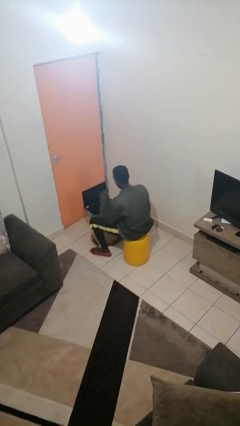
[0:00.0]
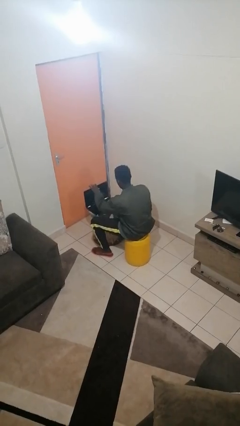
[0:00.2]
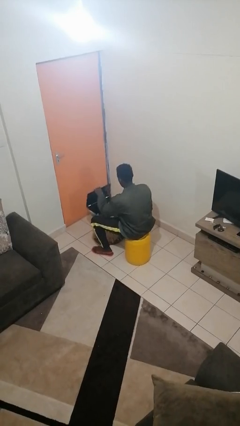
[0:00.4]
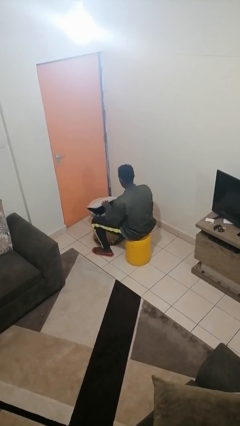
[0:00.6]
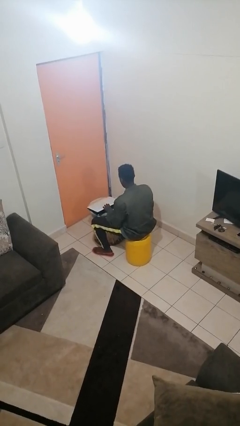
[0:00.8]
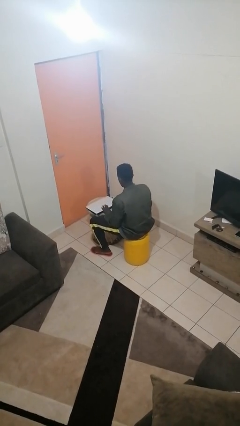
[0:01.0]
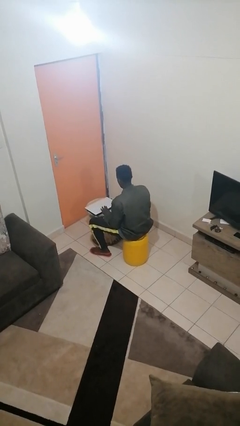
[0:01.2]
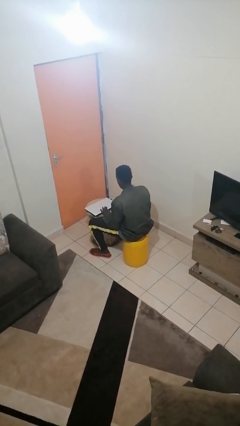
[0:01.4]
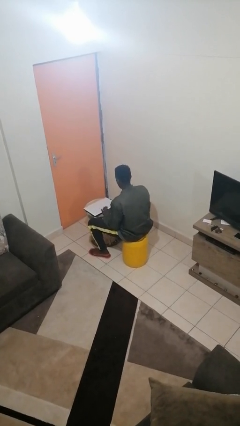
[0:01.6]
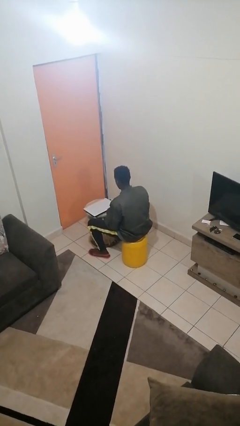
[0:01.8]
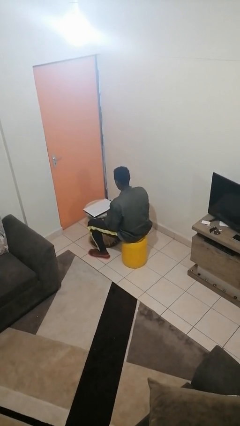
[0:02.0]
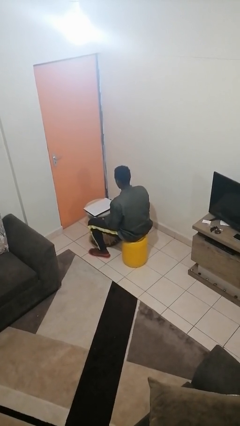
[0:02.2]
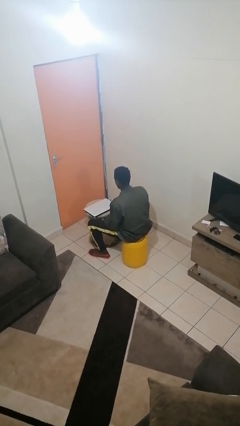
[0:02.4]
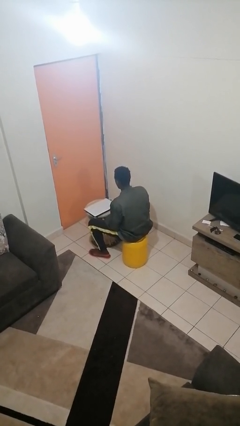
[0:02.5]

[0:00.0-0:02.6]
person closes laptop

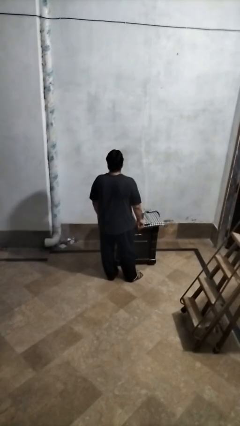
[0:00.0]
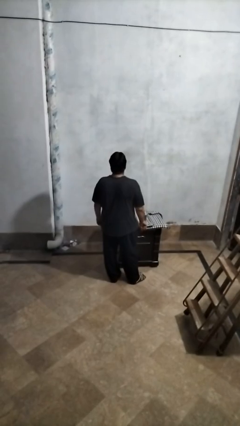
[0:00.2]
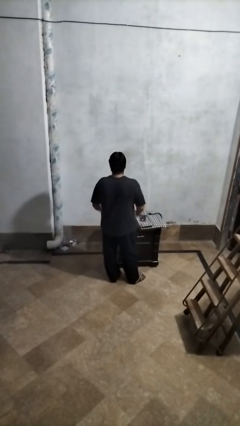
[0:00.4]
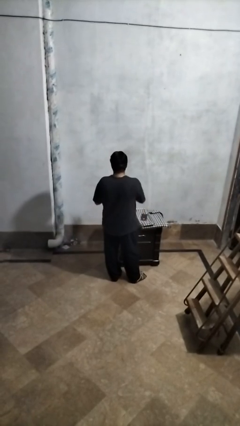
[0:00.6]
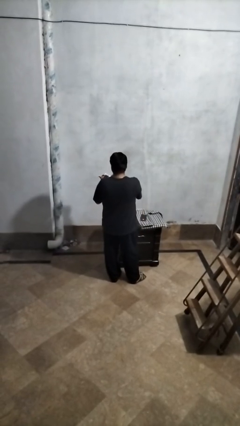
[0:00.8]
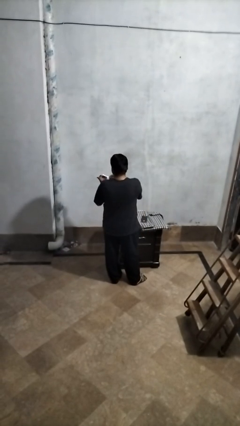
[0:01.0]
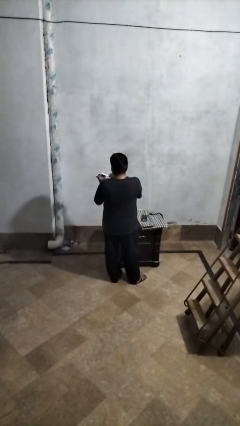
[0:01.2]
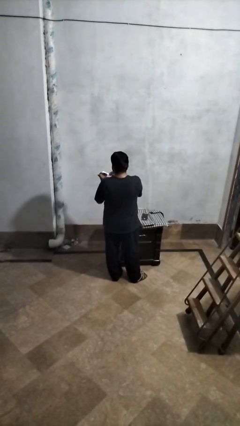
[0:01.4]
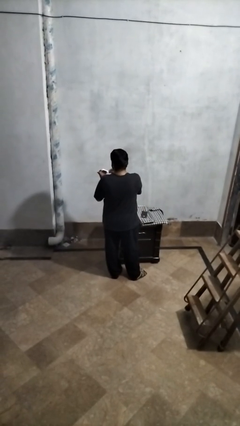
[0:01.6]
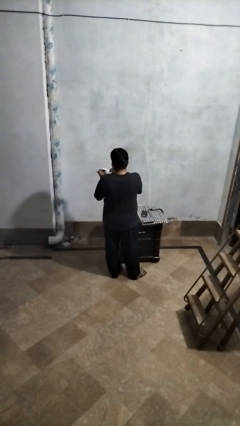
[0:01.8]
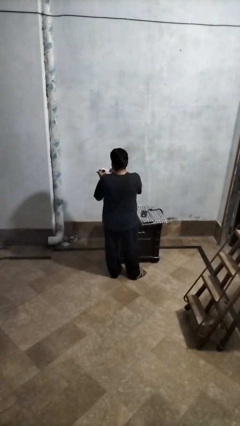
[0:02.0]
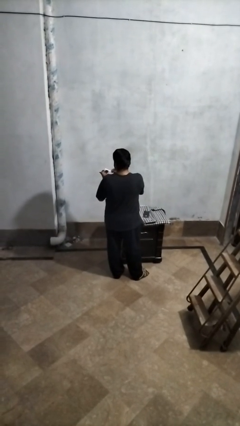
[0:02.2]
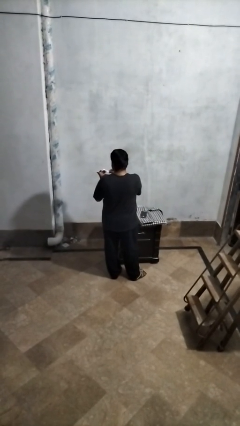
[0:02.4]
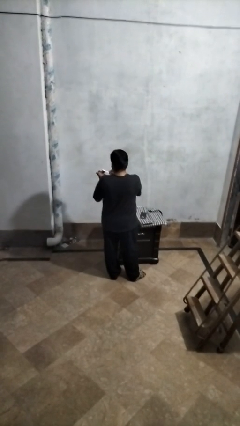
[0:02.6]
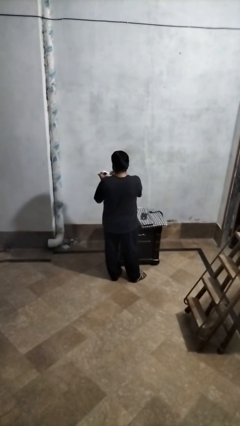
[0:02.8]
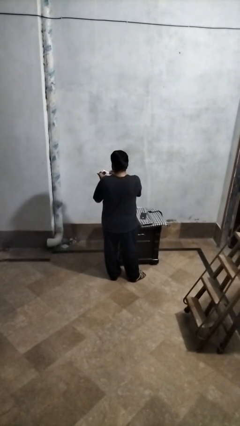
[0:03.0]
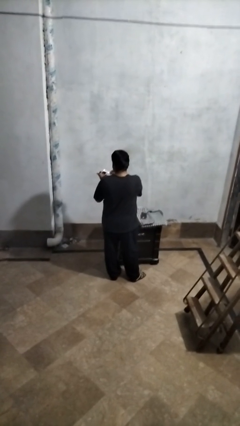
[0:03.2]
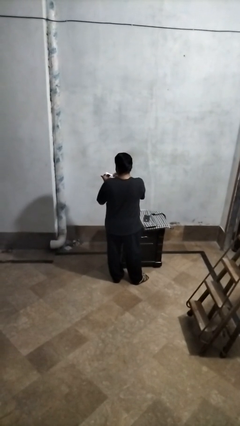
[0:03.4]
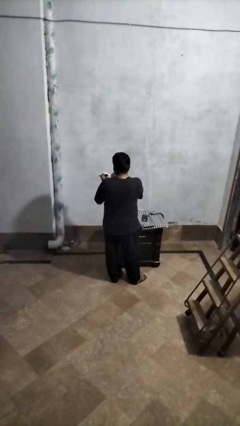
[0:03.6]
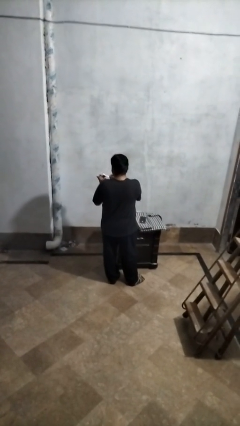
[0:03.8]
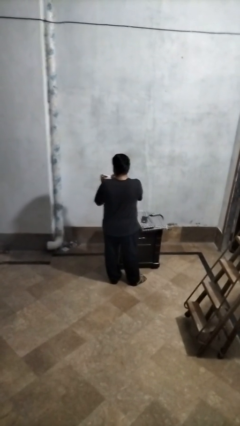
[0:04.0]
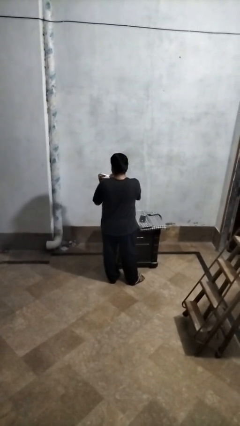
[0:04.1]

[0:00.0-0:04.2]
person files fingernails

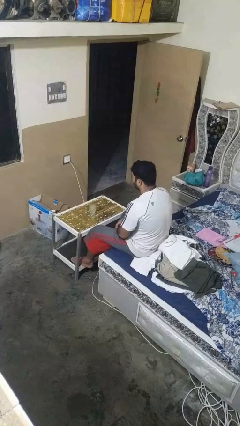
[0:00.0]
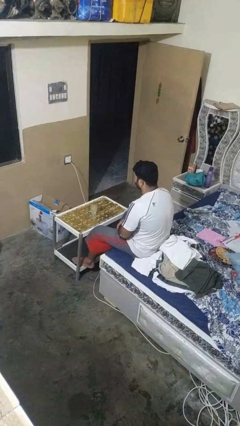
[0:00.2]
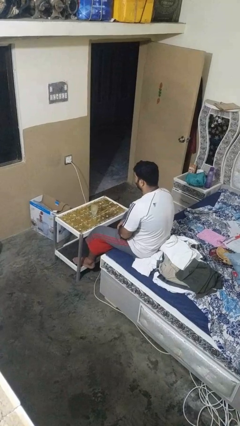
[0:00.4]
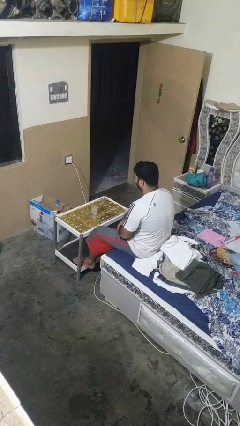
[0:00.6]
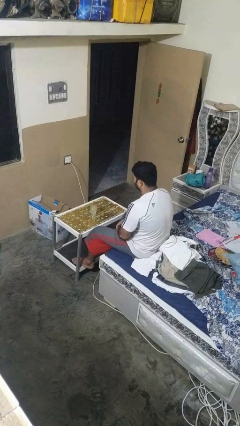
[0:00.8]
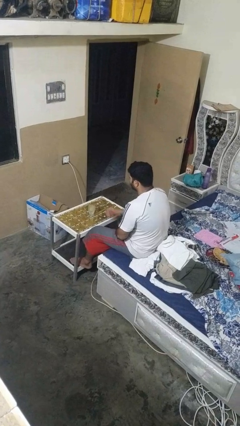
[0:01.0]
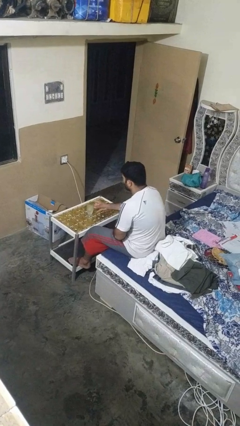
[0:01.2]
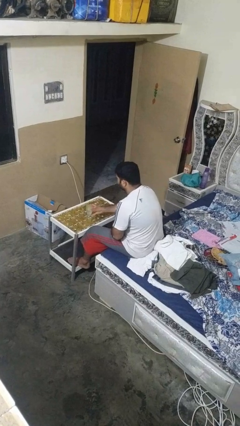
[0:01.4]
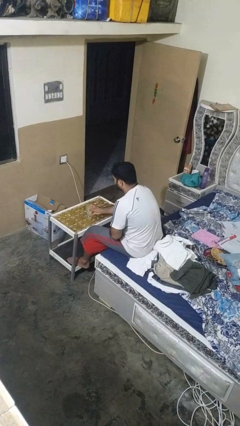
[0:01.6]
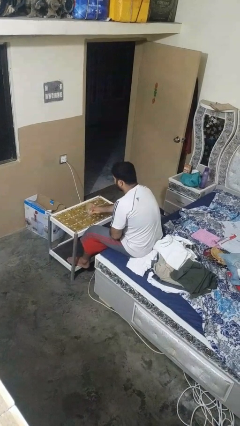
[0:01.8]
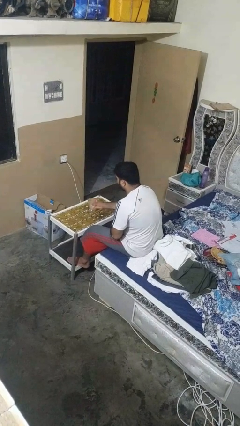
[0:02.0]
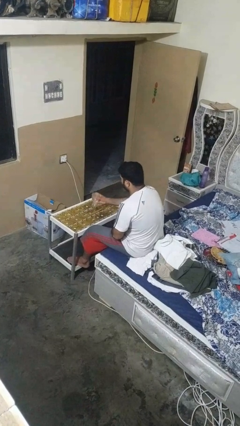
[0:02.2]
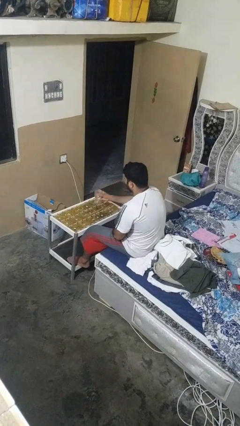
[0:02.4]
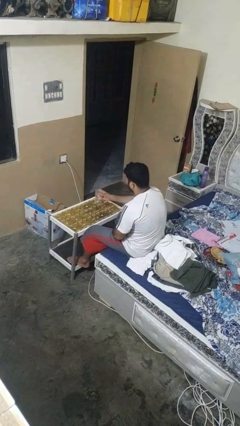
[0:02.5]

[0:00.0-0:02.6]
person picks up object from table

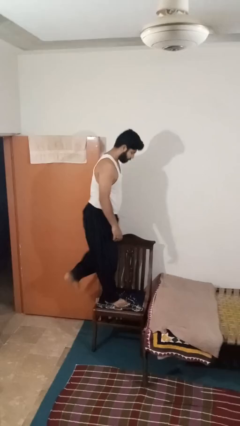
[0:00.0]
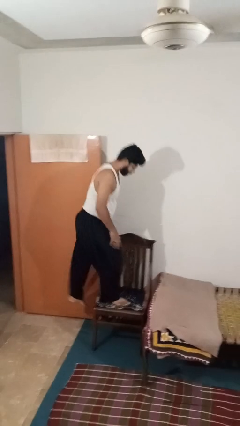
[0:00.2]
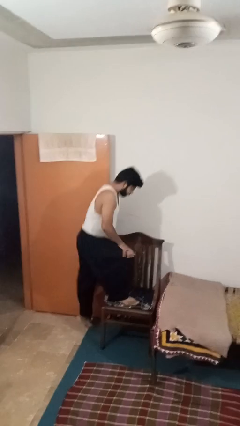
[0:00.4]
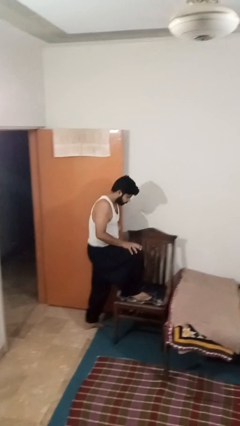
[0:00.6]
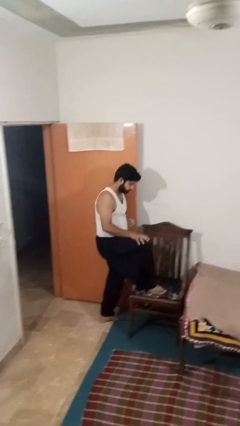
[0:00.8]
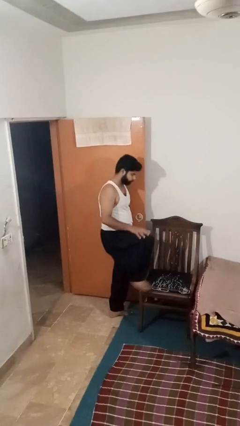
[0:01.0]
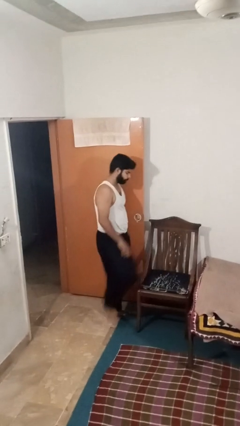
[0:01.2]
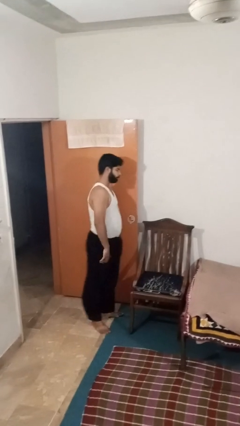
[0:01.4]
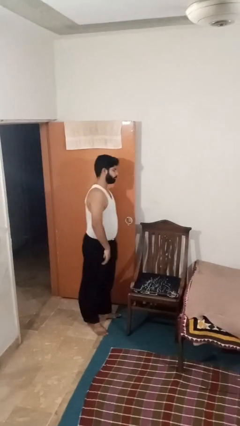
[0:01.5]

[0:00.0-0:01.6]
person climbs off chair

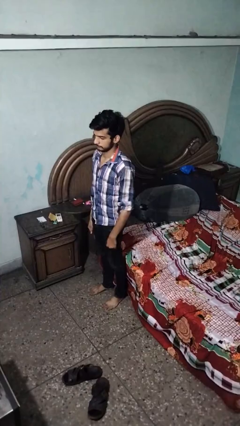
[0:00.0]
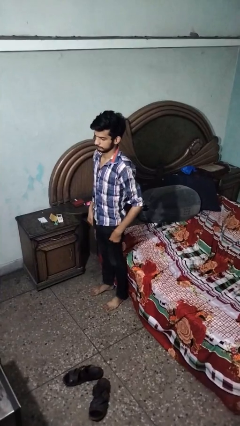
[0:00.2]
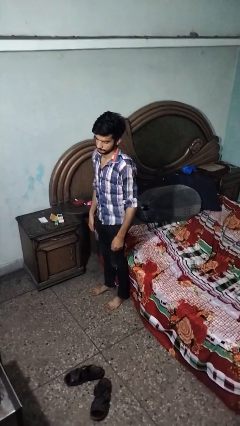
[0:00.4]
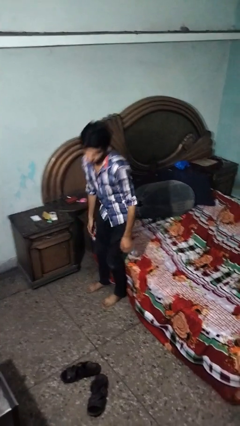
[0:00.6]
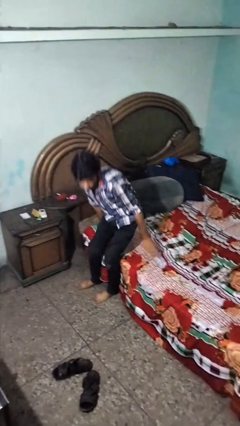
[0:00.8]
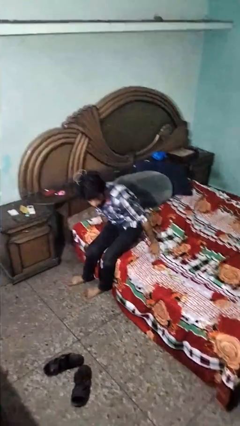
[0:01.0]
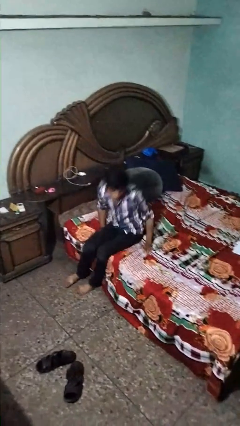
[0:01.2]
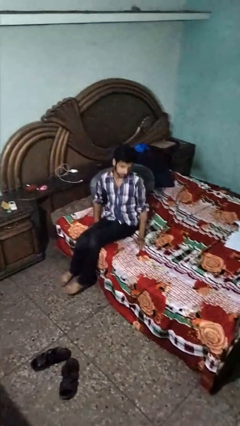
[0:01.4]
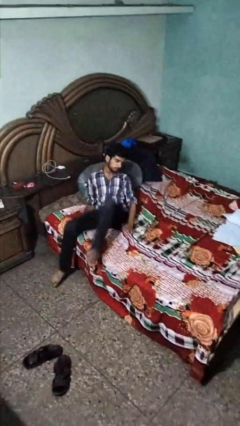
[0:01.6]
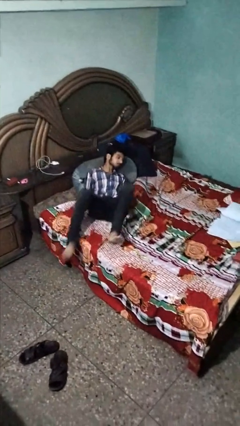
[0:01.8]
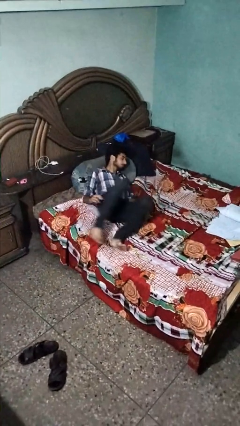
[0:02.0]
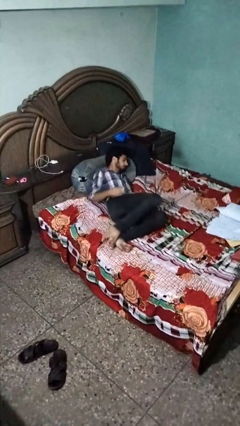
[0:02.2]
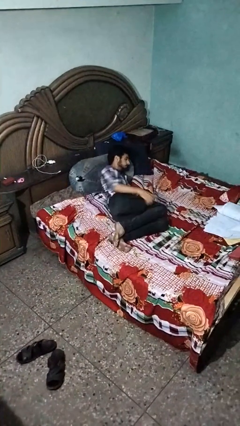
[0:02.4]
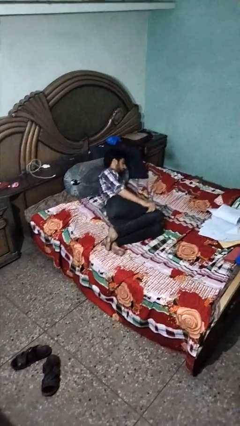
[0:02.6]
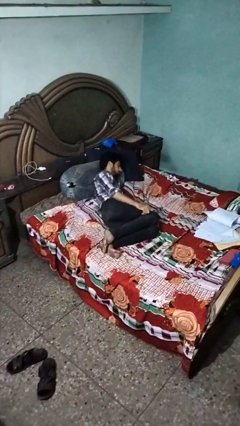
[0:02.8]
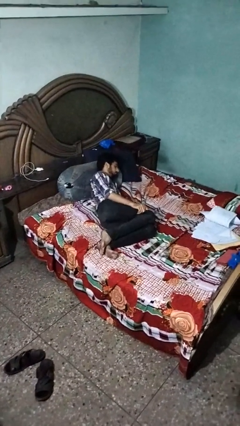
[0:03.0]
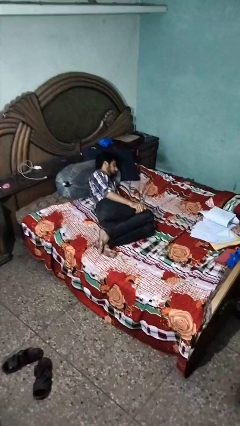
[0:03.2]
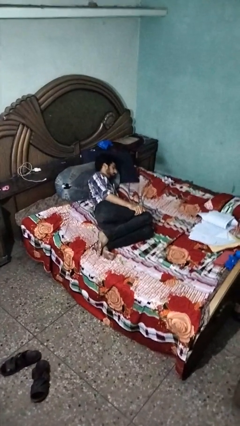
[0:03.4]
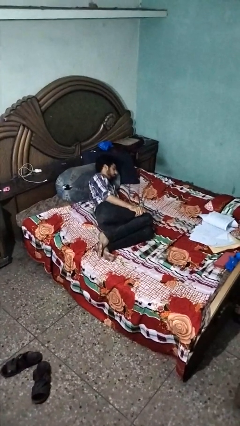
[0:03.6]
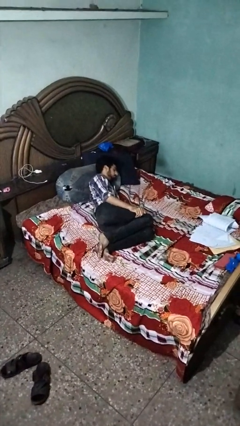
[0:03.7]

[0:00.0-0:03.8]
person lies down on bed

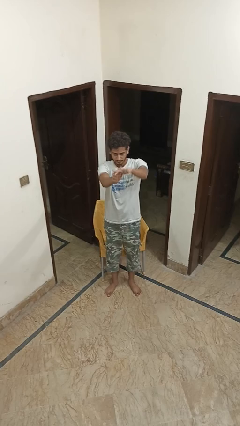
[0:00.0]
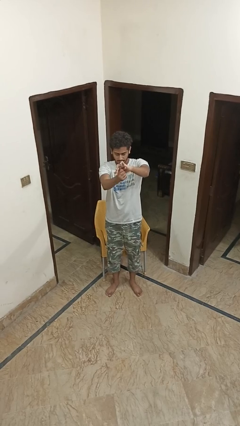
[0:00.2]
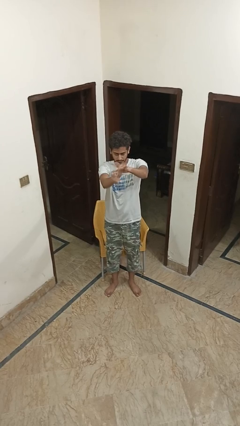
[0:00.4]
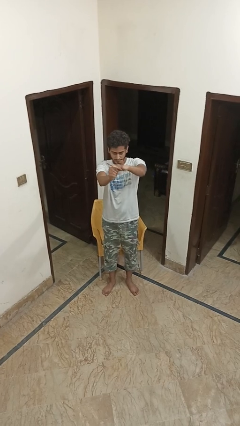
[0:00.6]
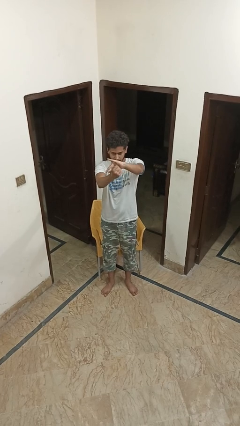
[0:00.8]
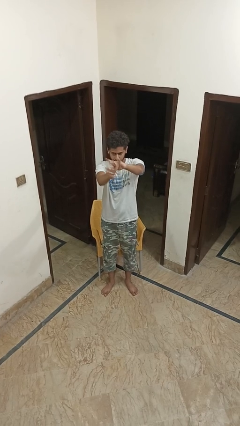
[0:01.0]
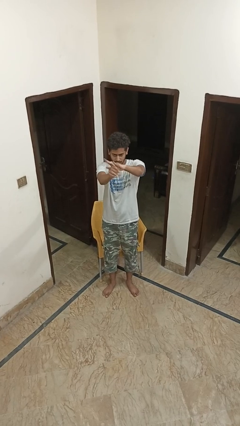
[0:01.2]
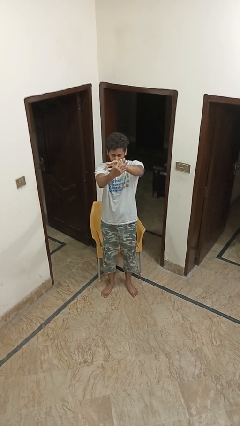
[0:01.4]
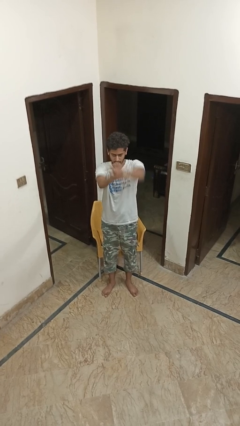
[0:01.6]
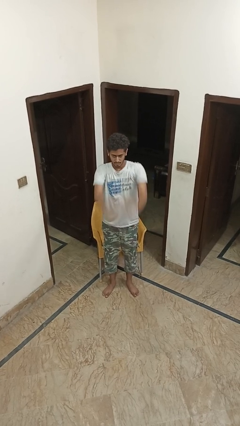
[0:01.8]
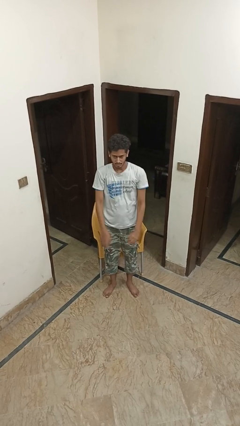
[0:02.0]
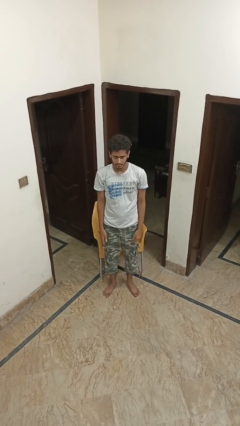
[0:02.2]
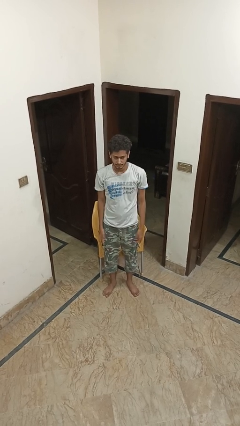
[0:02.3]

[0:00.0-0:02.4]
person cracks knuckles

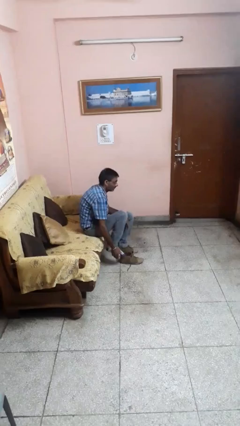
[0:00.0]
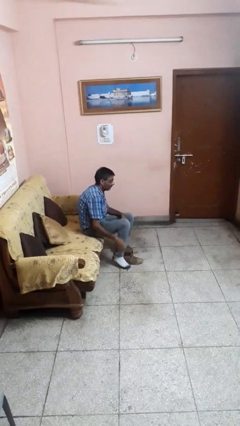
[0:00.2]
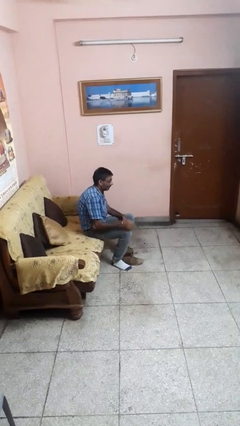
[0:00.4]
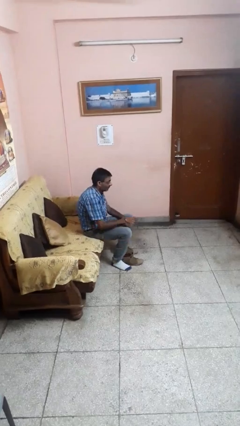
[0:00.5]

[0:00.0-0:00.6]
person takes off shoes
